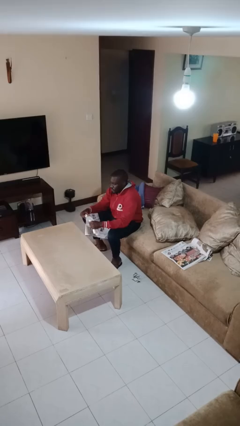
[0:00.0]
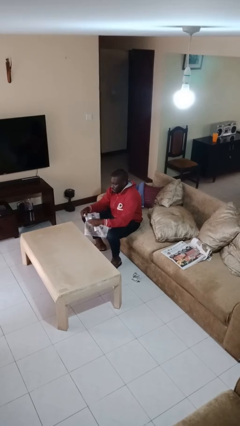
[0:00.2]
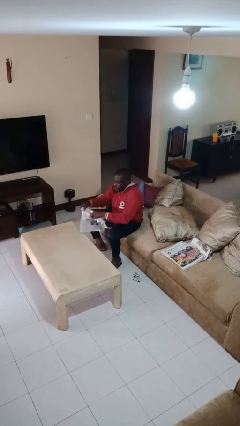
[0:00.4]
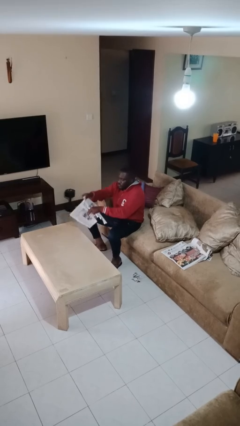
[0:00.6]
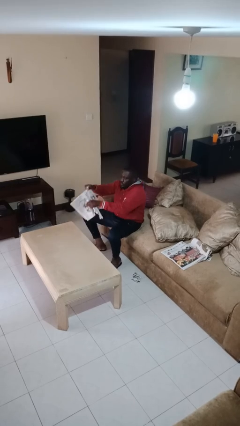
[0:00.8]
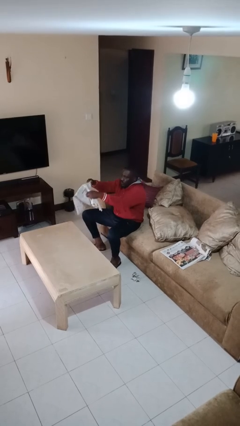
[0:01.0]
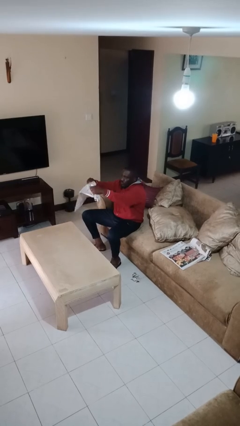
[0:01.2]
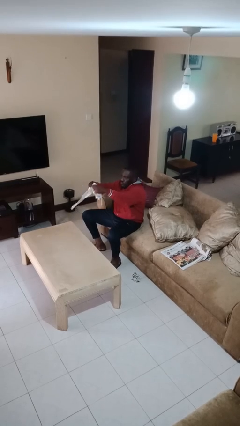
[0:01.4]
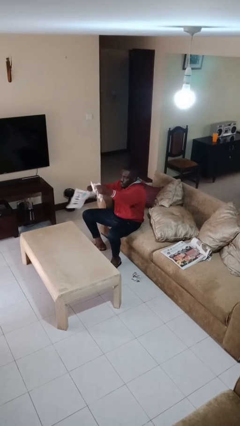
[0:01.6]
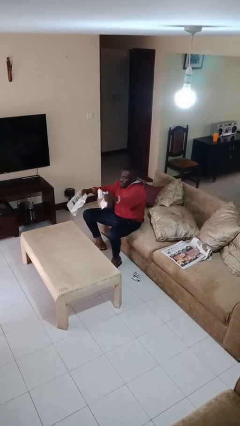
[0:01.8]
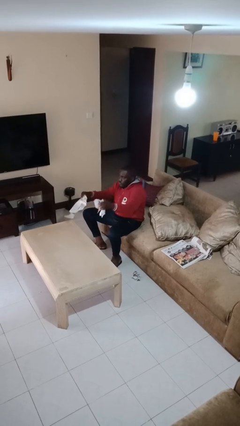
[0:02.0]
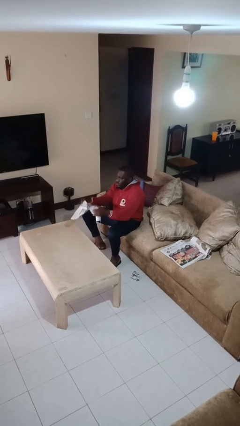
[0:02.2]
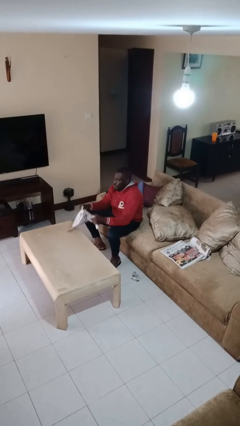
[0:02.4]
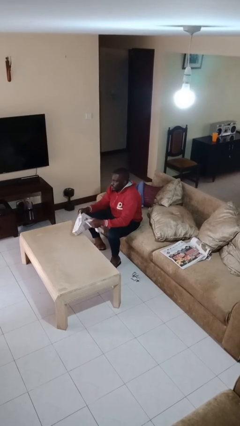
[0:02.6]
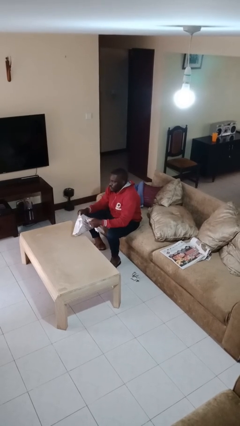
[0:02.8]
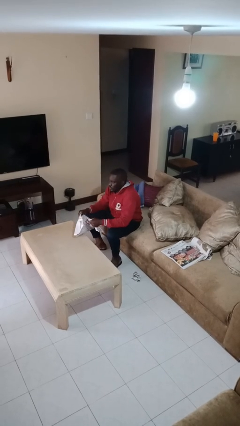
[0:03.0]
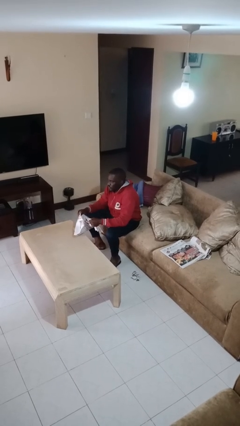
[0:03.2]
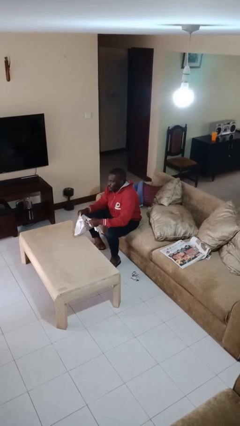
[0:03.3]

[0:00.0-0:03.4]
person tears paper

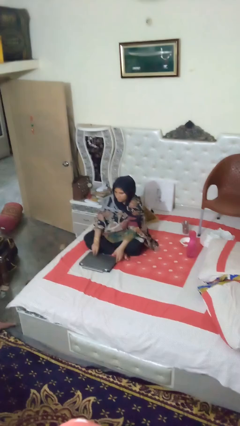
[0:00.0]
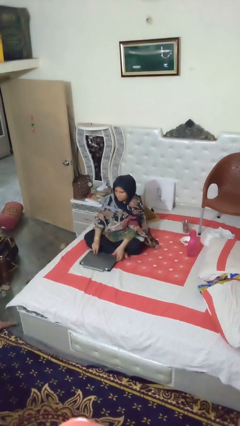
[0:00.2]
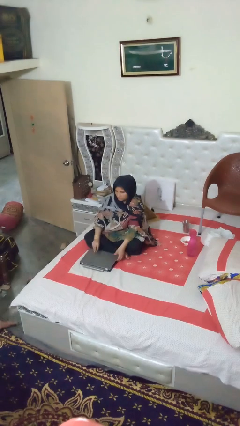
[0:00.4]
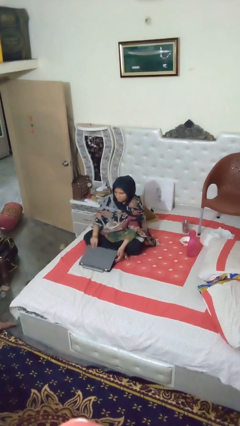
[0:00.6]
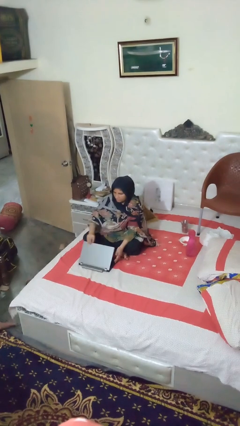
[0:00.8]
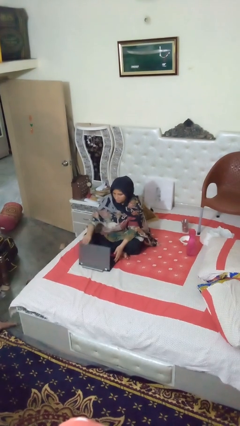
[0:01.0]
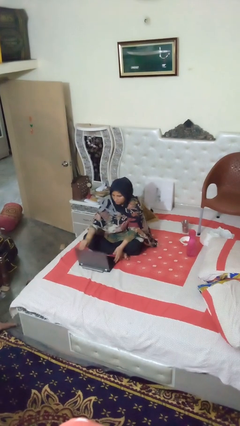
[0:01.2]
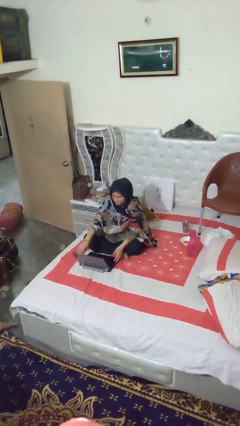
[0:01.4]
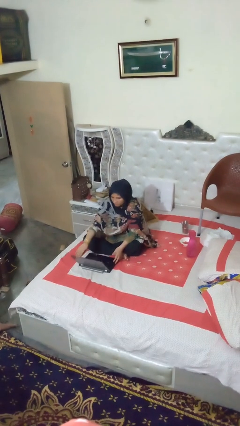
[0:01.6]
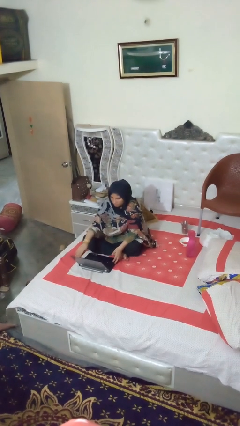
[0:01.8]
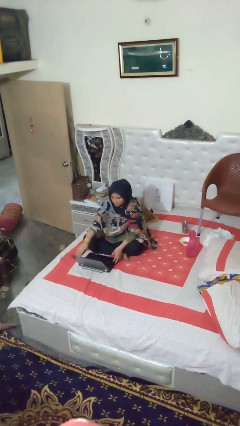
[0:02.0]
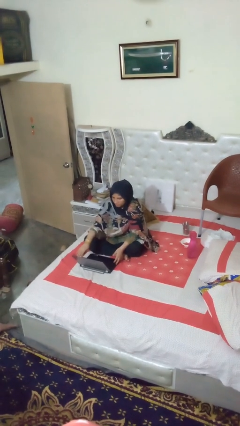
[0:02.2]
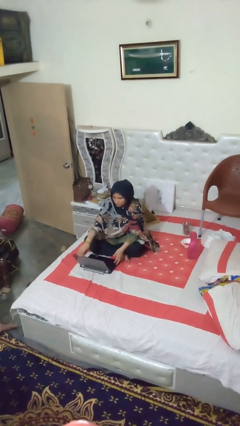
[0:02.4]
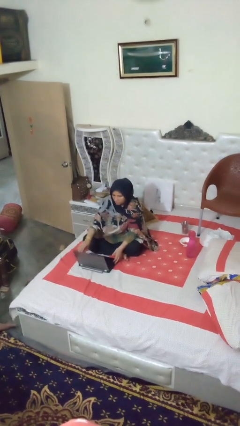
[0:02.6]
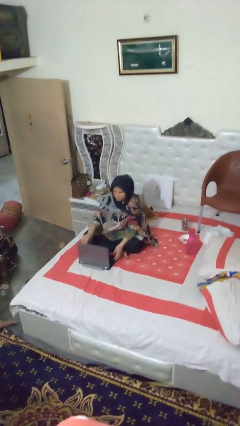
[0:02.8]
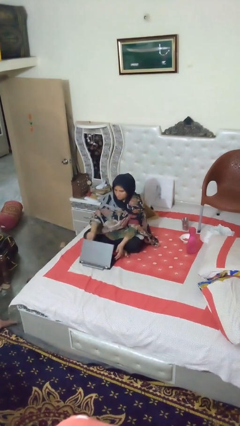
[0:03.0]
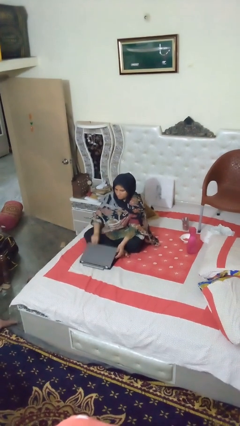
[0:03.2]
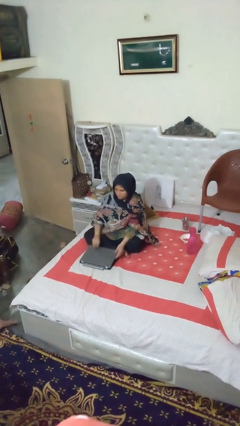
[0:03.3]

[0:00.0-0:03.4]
person opens laptop

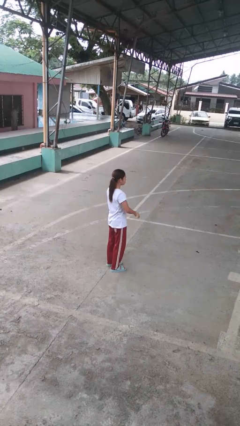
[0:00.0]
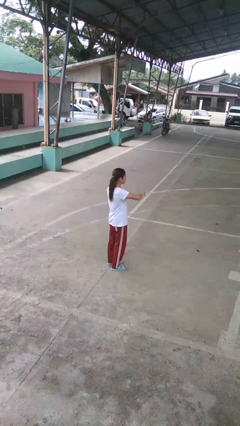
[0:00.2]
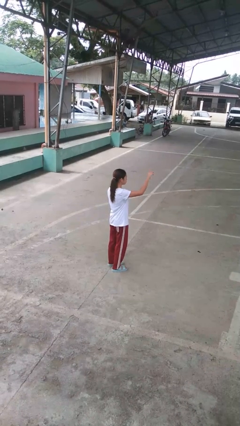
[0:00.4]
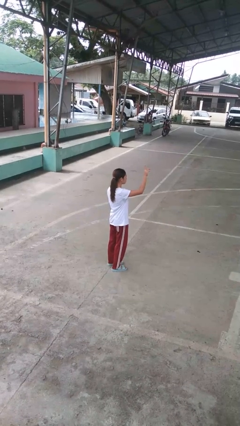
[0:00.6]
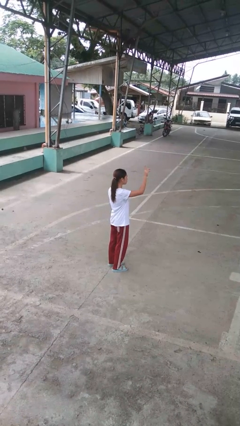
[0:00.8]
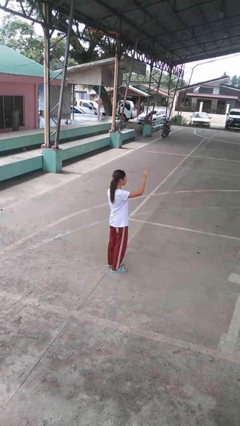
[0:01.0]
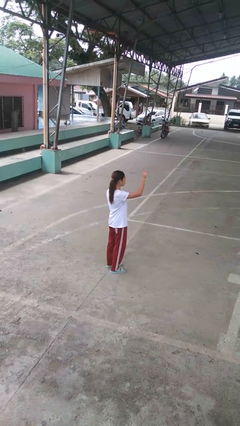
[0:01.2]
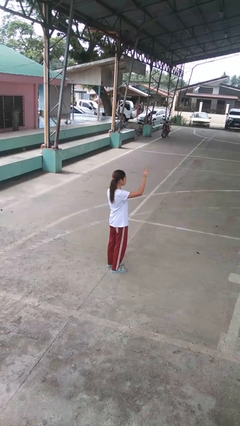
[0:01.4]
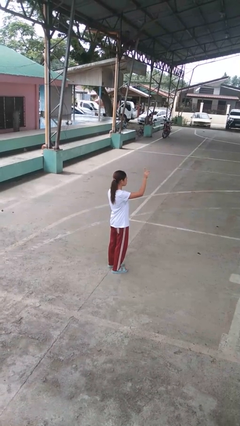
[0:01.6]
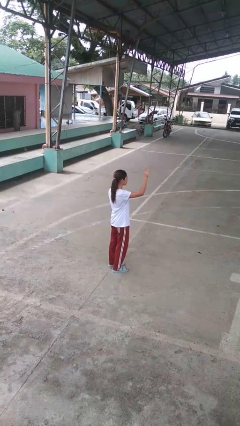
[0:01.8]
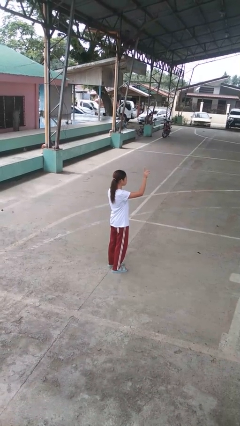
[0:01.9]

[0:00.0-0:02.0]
person gestures swipe up

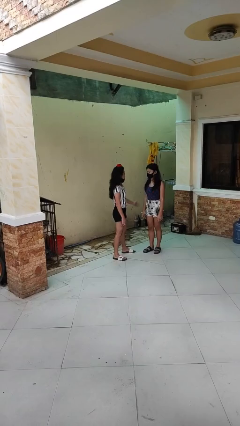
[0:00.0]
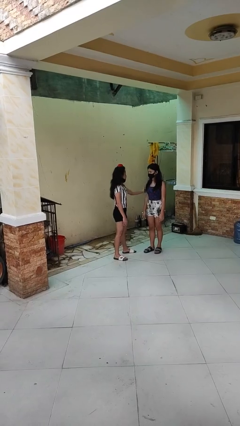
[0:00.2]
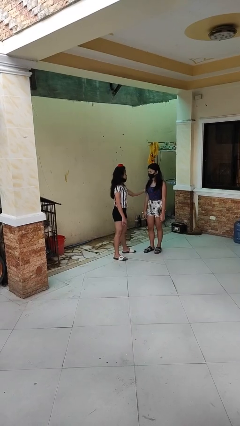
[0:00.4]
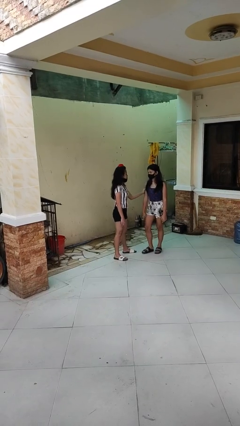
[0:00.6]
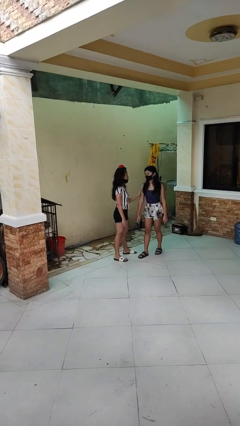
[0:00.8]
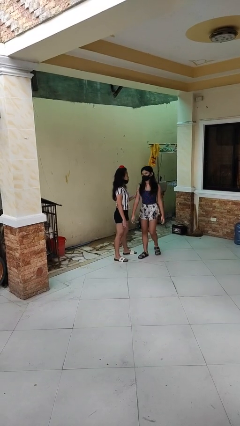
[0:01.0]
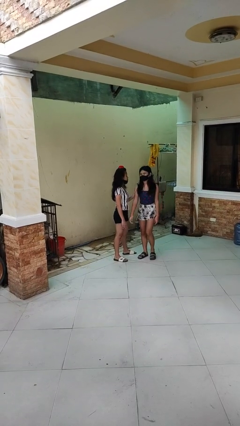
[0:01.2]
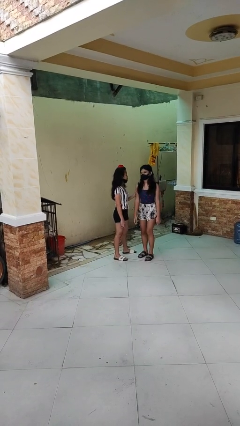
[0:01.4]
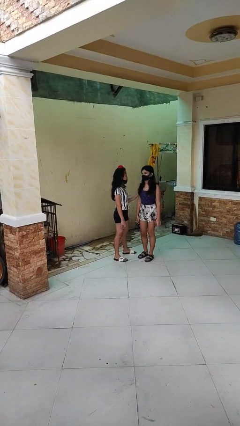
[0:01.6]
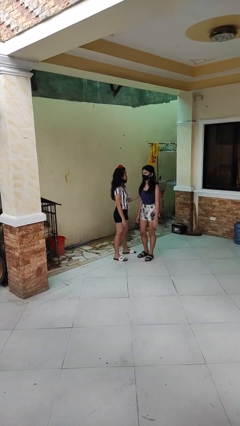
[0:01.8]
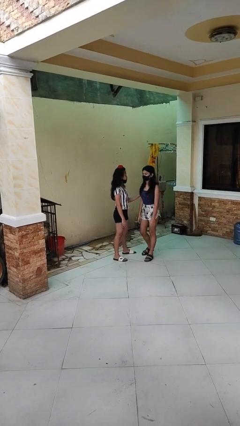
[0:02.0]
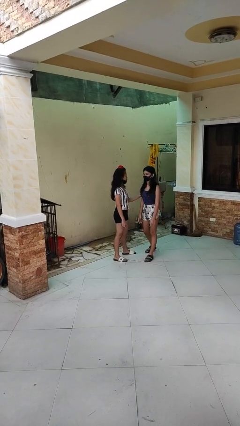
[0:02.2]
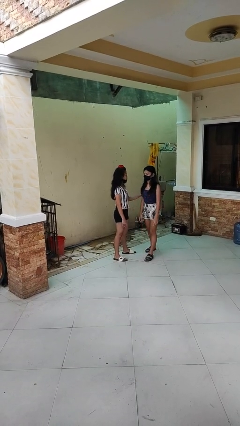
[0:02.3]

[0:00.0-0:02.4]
person grabs person by bicep

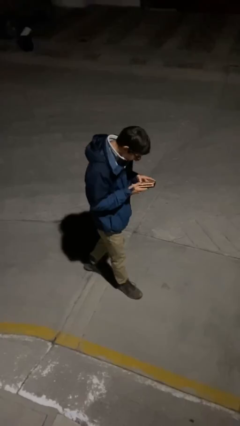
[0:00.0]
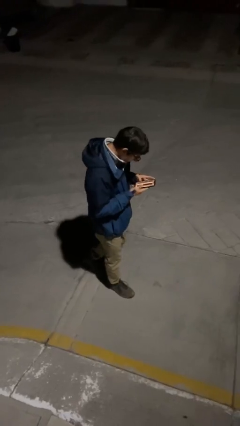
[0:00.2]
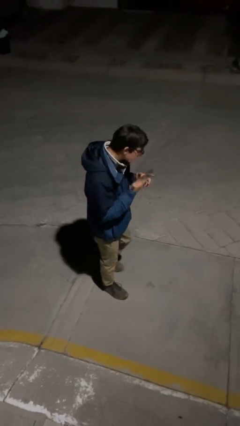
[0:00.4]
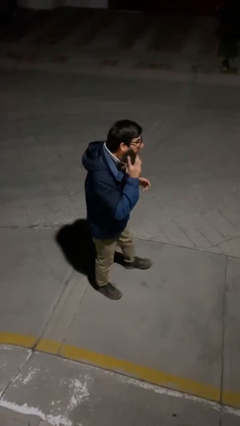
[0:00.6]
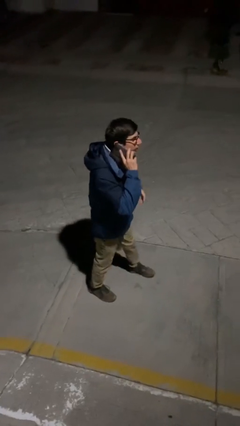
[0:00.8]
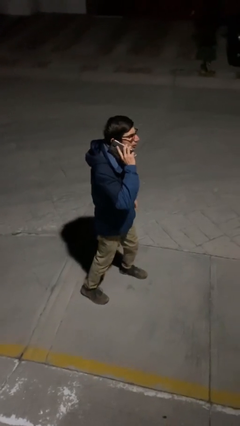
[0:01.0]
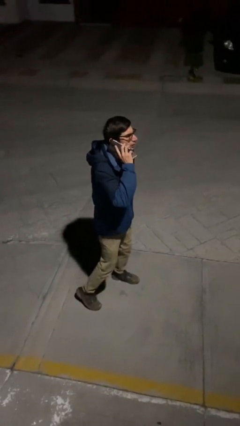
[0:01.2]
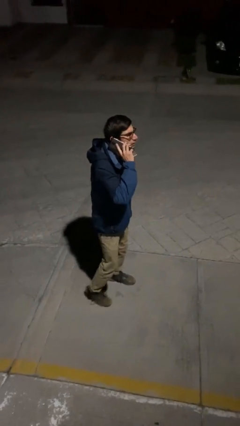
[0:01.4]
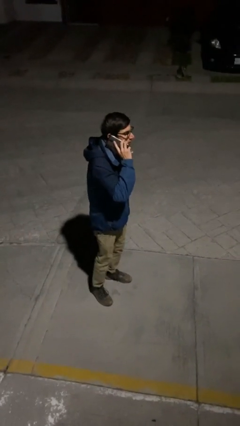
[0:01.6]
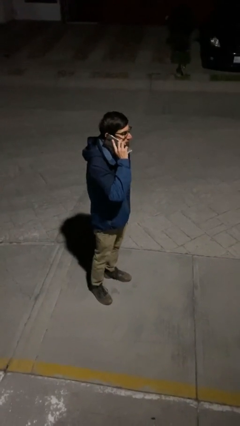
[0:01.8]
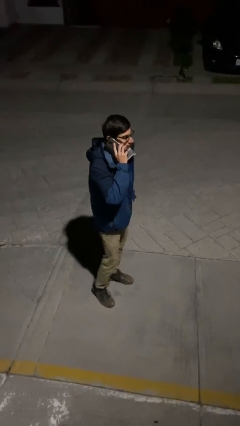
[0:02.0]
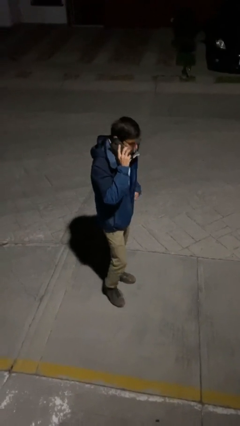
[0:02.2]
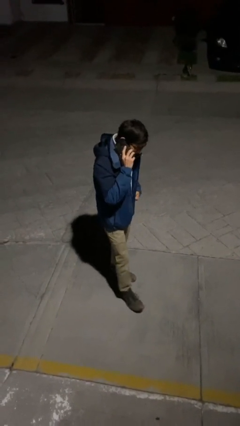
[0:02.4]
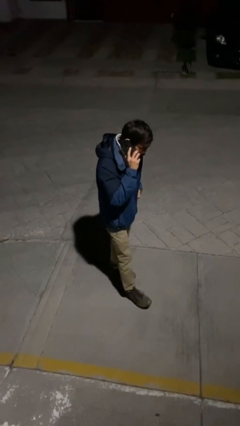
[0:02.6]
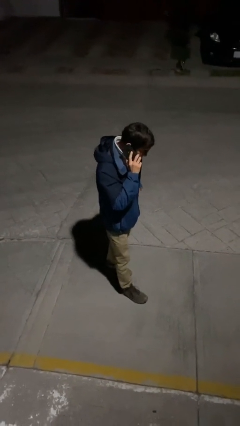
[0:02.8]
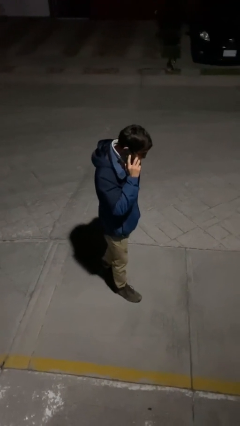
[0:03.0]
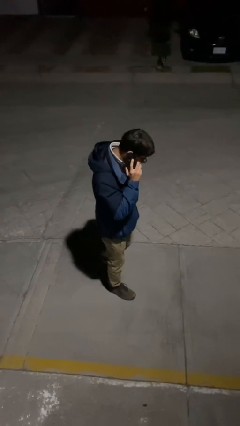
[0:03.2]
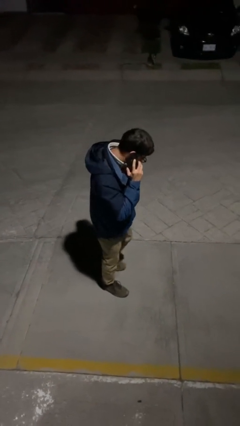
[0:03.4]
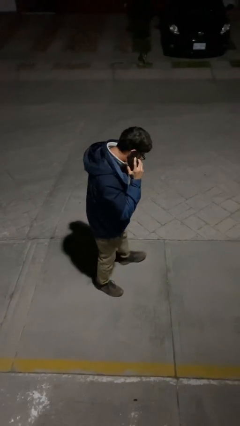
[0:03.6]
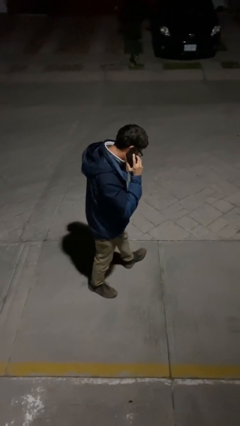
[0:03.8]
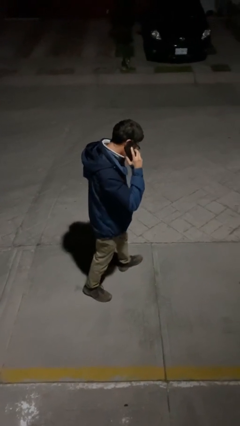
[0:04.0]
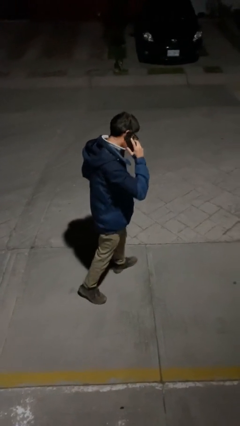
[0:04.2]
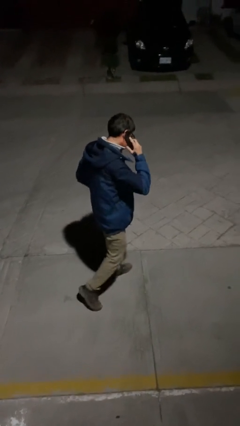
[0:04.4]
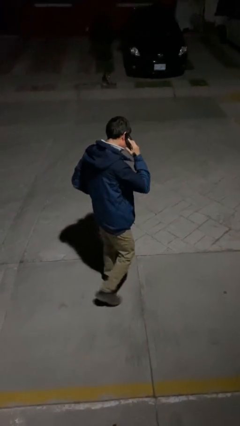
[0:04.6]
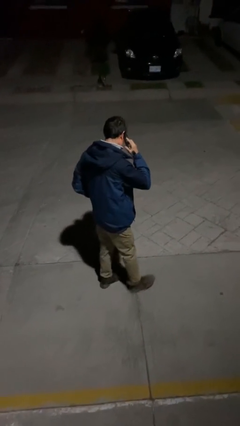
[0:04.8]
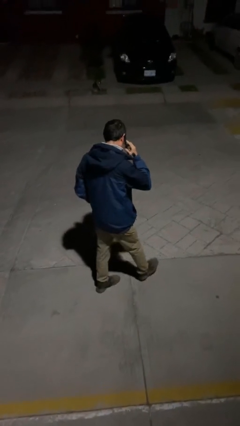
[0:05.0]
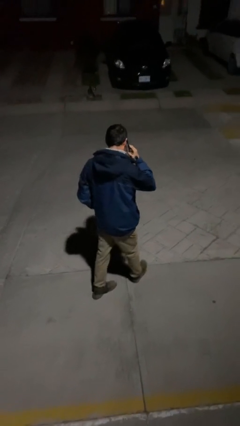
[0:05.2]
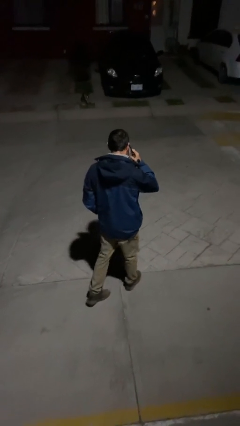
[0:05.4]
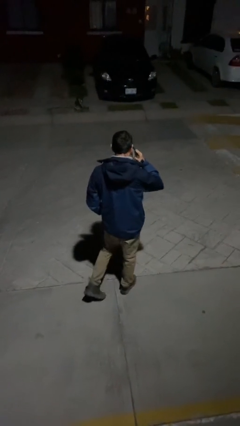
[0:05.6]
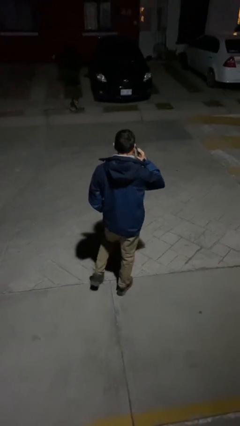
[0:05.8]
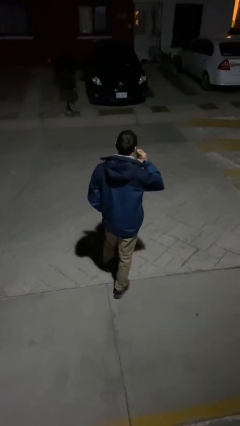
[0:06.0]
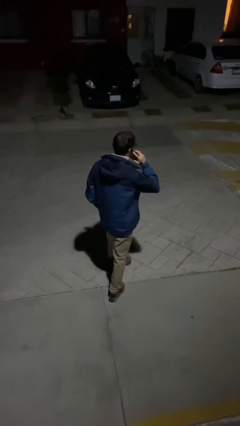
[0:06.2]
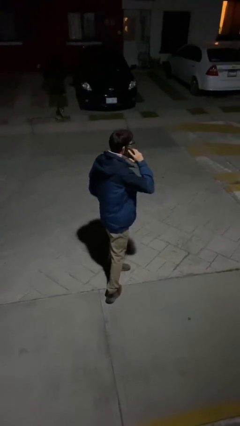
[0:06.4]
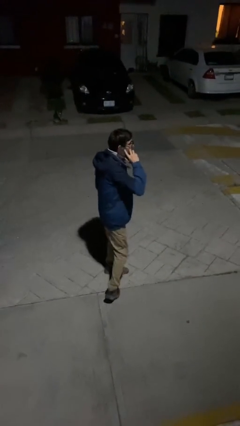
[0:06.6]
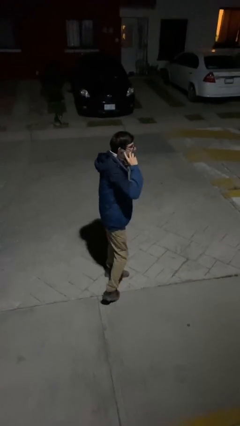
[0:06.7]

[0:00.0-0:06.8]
person talks on phone
